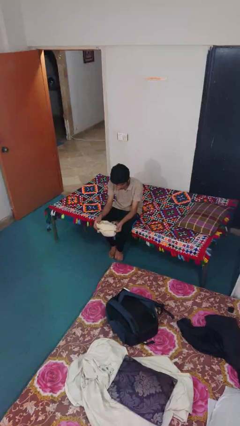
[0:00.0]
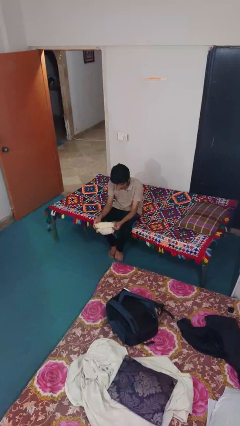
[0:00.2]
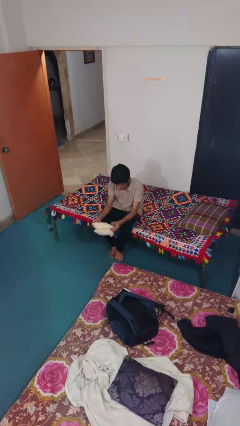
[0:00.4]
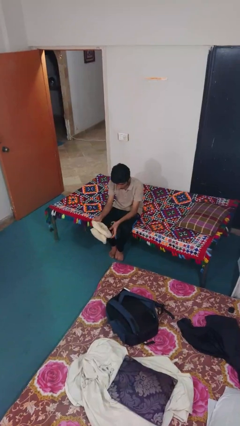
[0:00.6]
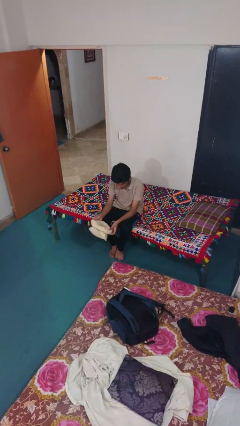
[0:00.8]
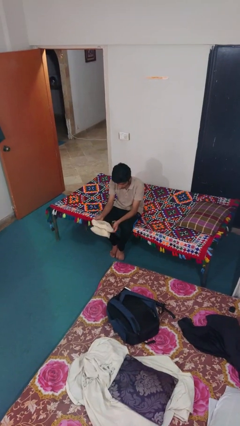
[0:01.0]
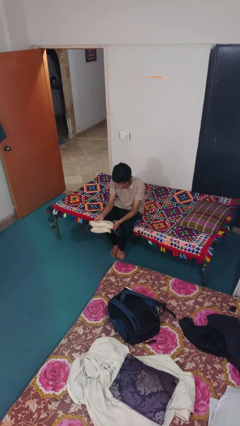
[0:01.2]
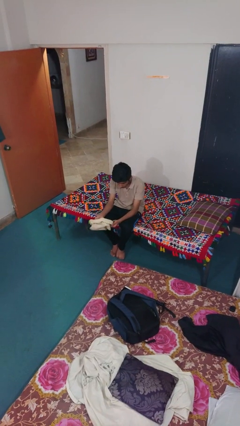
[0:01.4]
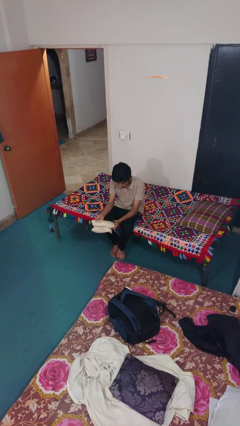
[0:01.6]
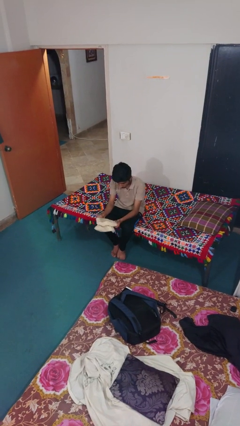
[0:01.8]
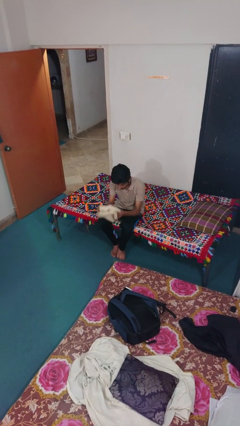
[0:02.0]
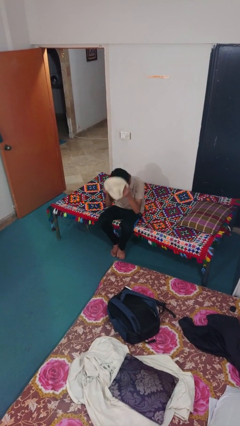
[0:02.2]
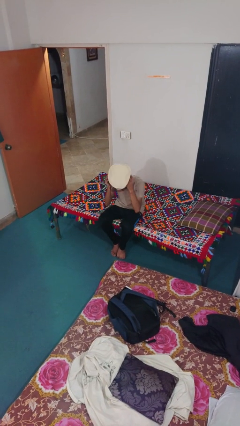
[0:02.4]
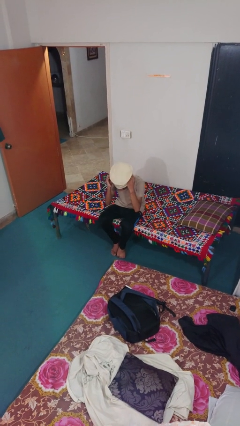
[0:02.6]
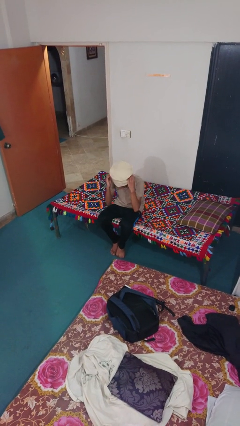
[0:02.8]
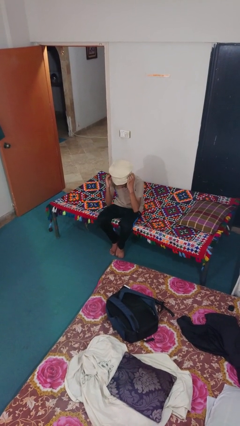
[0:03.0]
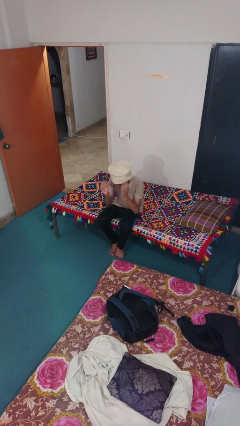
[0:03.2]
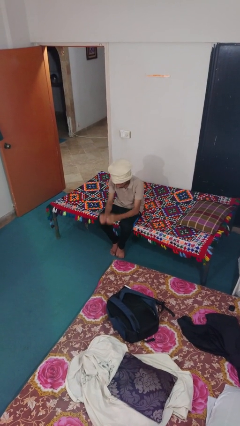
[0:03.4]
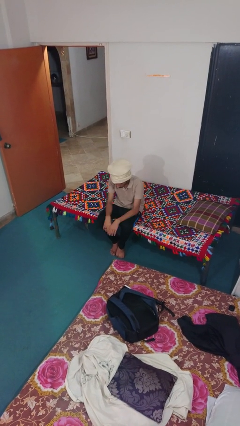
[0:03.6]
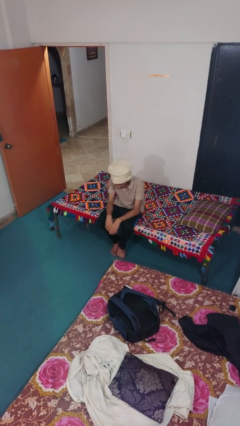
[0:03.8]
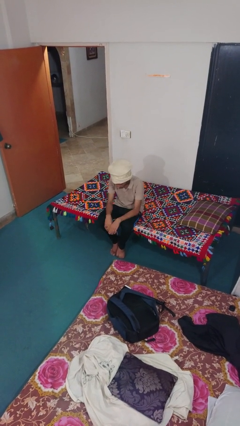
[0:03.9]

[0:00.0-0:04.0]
person puts on hat

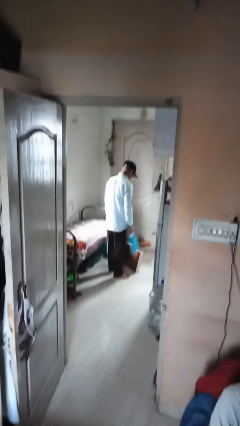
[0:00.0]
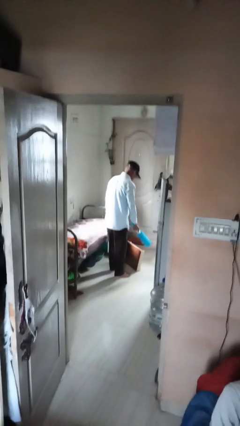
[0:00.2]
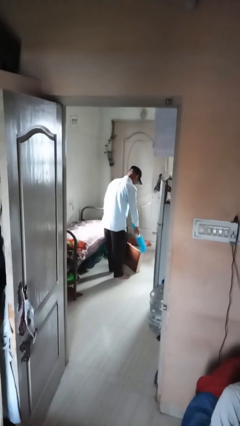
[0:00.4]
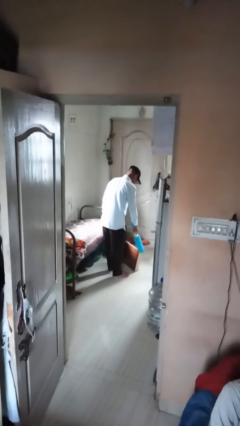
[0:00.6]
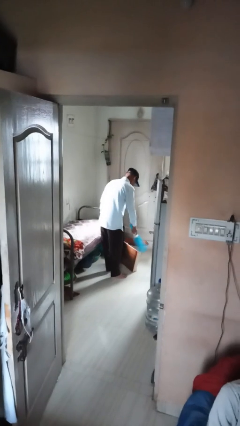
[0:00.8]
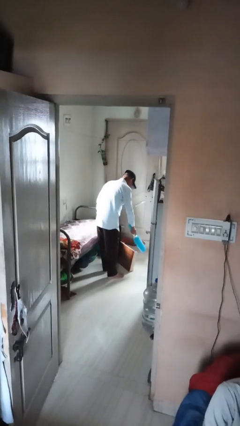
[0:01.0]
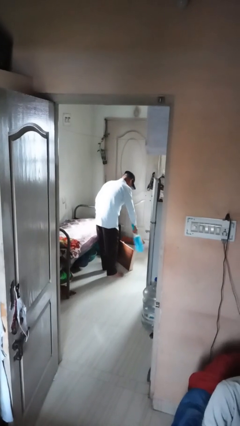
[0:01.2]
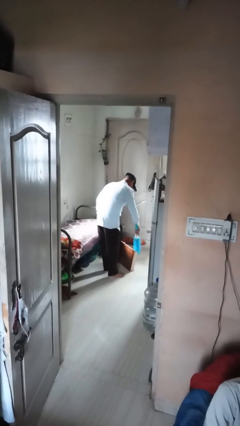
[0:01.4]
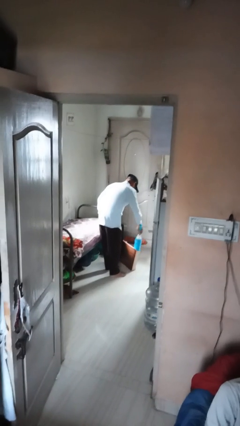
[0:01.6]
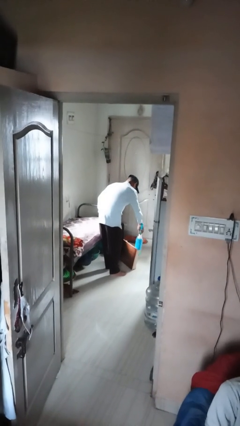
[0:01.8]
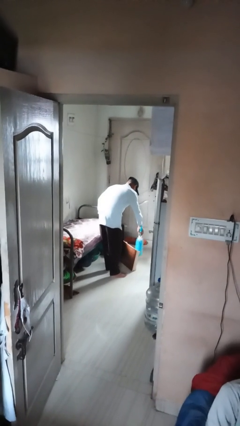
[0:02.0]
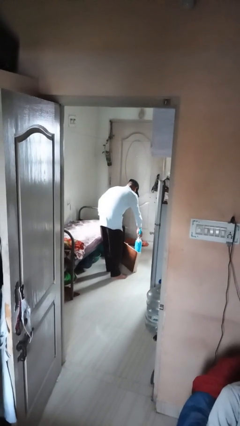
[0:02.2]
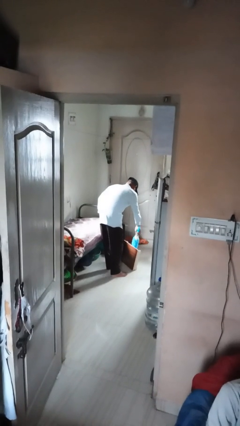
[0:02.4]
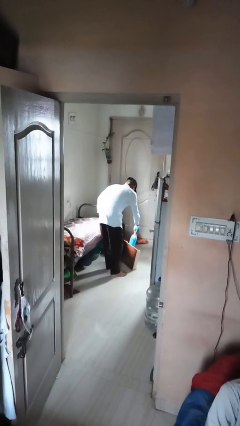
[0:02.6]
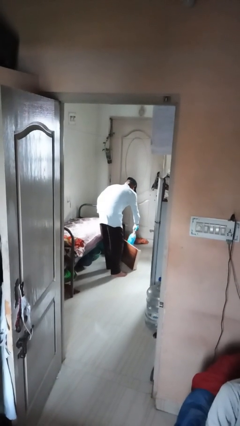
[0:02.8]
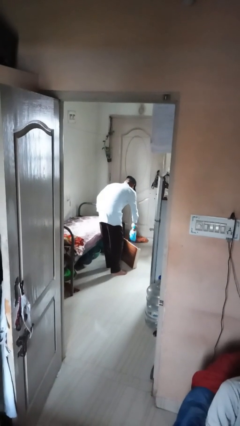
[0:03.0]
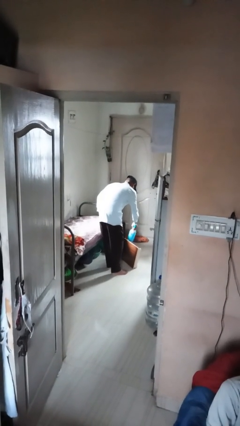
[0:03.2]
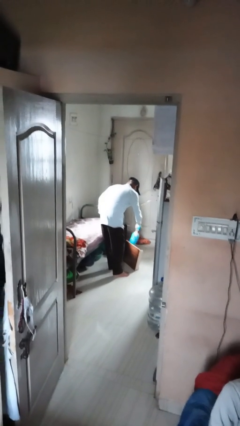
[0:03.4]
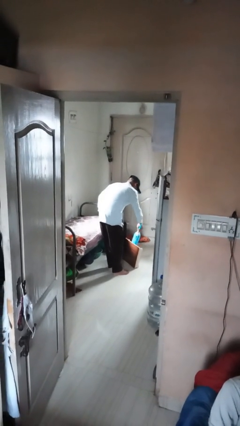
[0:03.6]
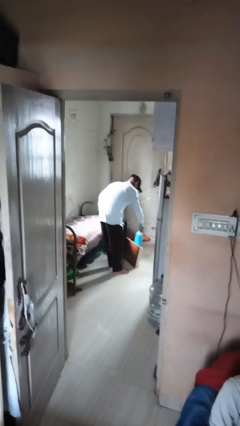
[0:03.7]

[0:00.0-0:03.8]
person dusts furniture

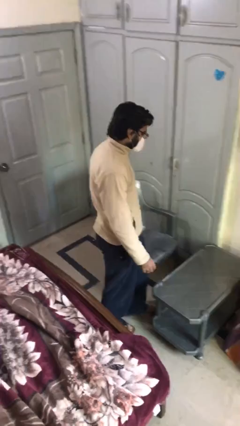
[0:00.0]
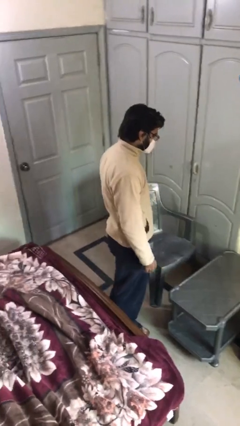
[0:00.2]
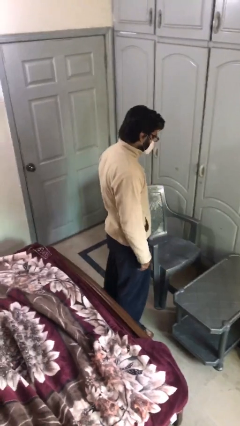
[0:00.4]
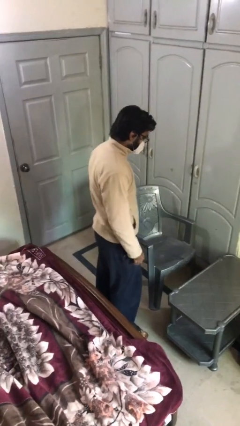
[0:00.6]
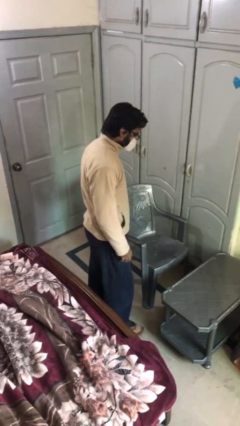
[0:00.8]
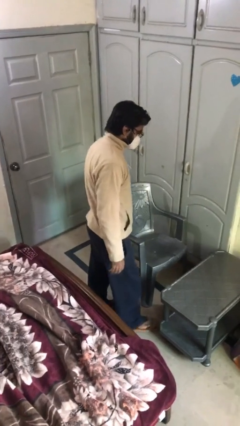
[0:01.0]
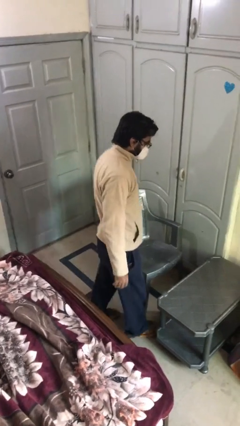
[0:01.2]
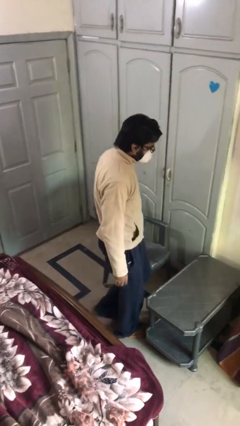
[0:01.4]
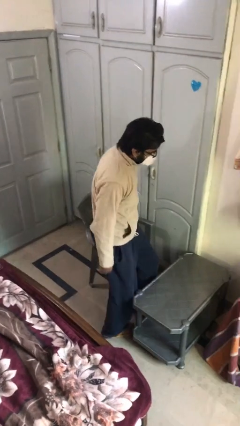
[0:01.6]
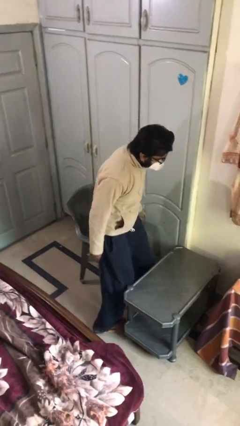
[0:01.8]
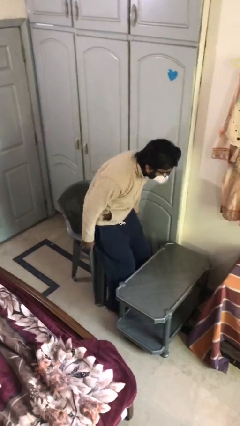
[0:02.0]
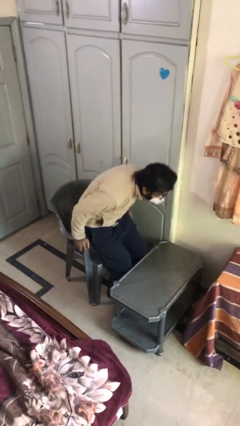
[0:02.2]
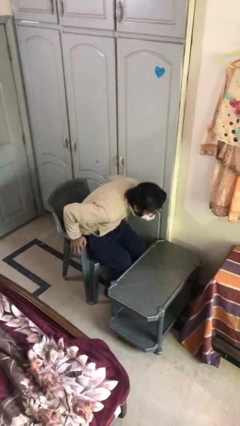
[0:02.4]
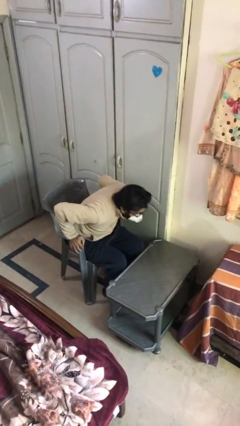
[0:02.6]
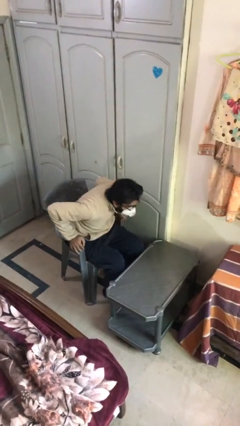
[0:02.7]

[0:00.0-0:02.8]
person sits down

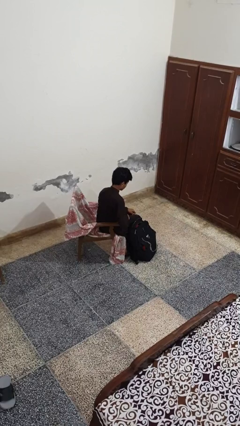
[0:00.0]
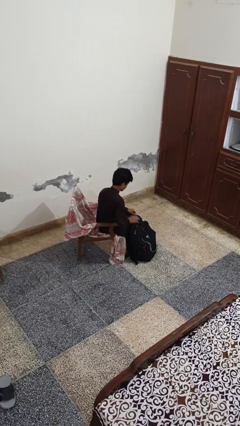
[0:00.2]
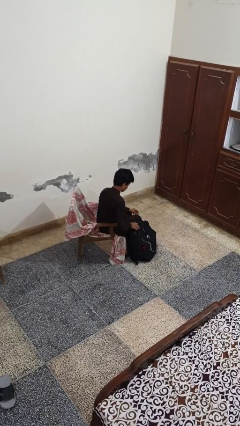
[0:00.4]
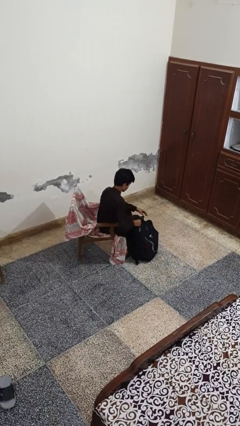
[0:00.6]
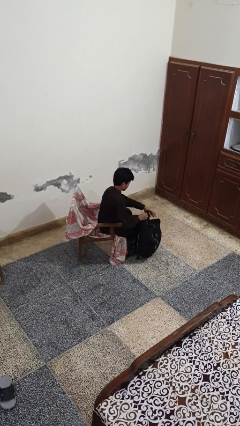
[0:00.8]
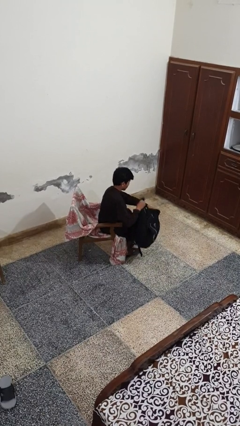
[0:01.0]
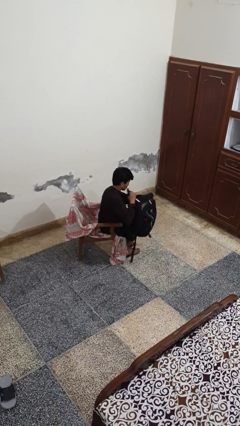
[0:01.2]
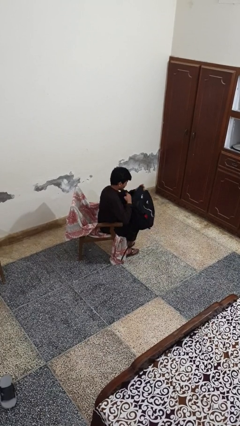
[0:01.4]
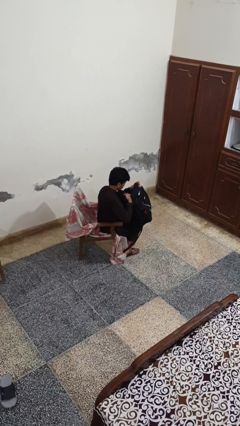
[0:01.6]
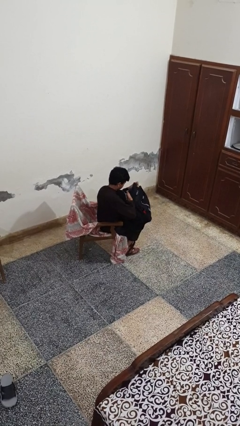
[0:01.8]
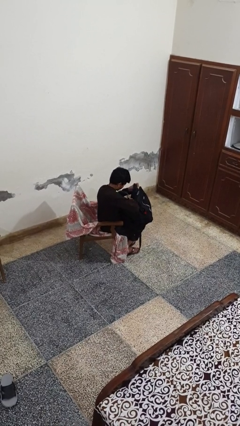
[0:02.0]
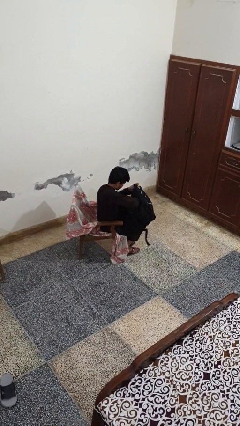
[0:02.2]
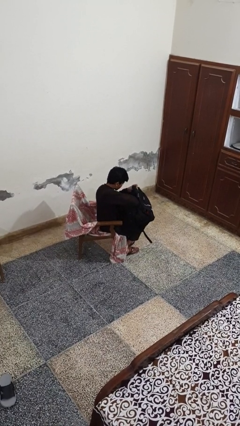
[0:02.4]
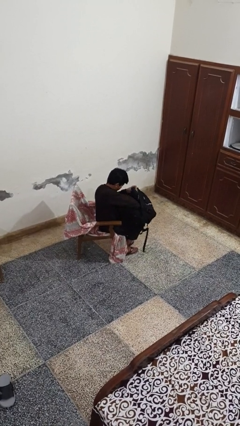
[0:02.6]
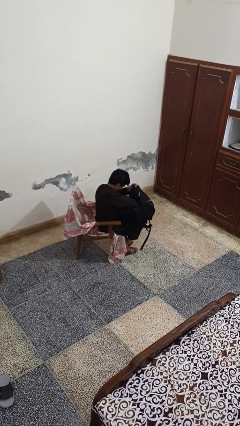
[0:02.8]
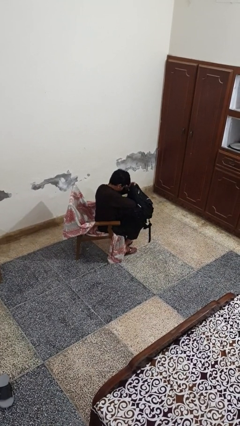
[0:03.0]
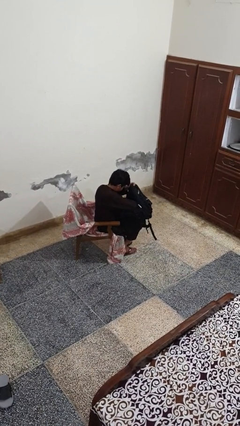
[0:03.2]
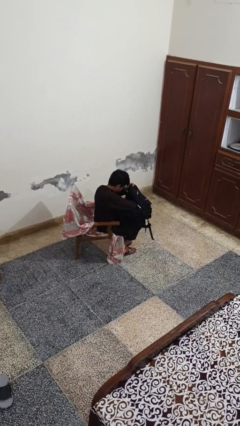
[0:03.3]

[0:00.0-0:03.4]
person searches in backpack

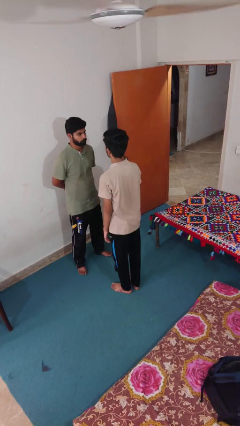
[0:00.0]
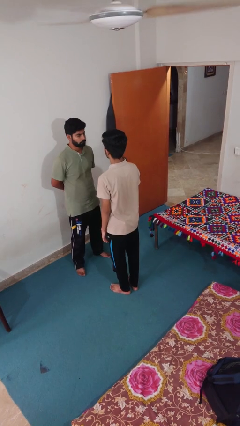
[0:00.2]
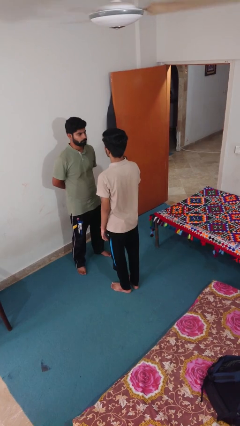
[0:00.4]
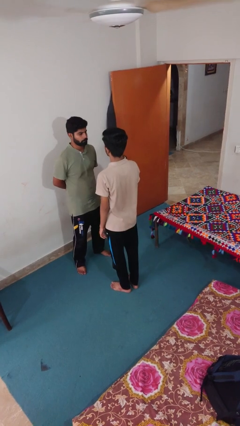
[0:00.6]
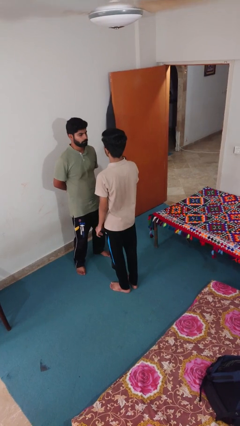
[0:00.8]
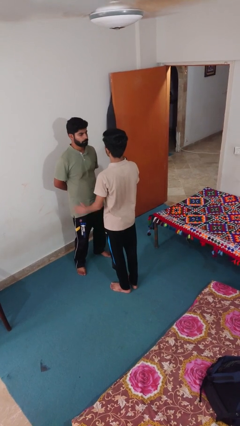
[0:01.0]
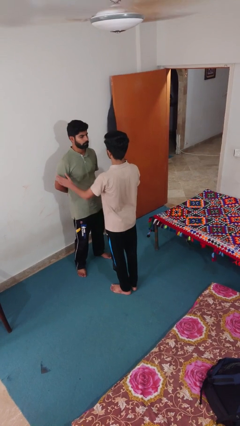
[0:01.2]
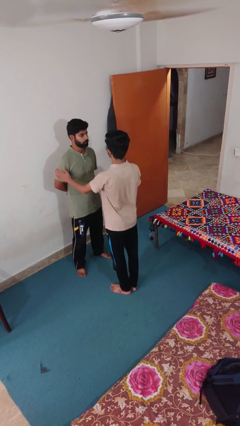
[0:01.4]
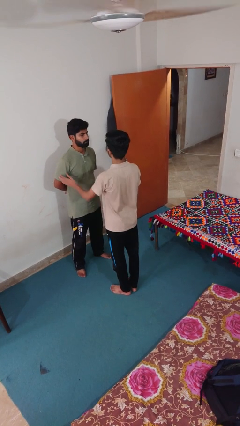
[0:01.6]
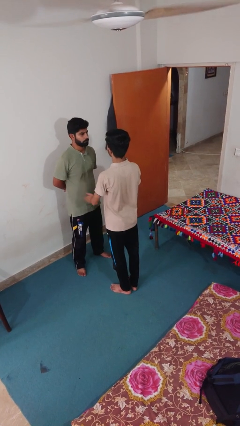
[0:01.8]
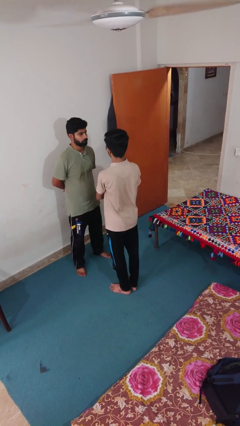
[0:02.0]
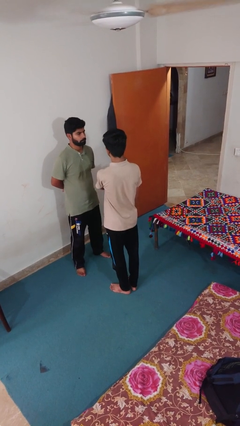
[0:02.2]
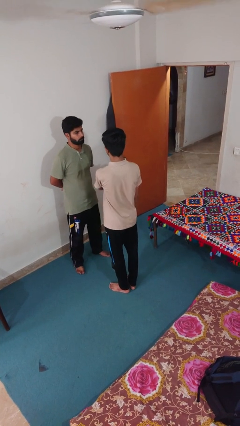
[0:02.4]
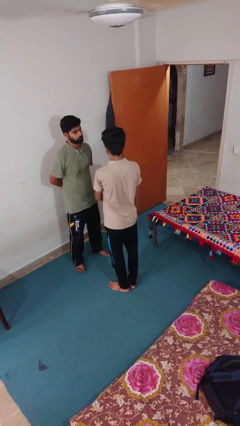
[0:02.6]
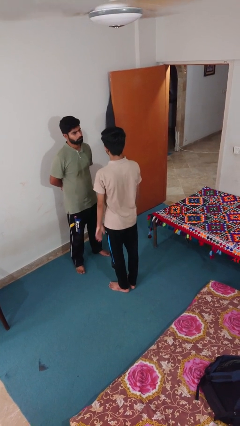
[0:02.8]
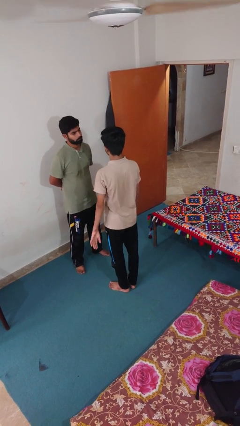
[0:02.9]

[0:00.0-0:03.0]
person shoves person

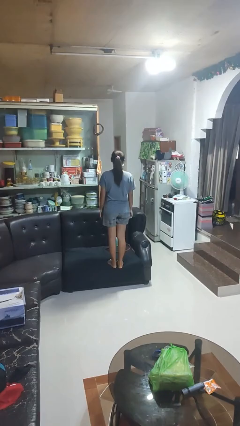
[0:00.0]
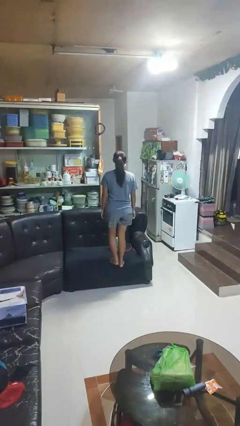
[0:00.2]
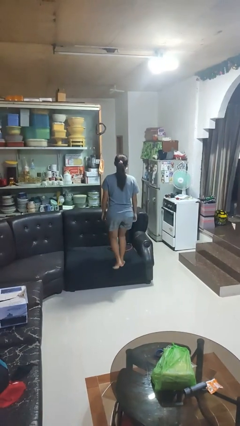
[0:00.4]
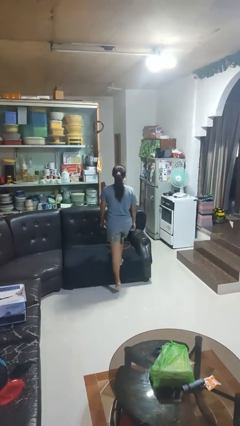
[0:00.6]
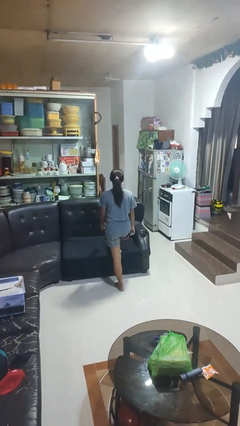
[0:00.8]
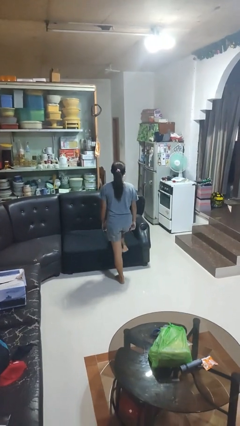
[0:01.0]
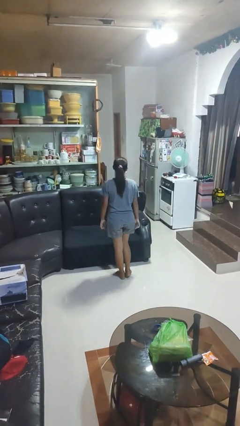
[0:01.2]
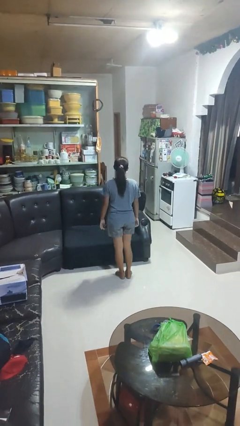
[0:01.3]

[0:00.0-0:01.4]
person climbs off couch
